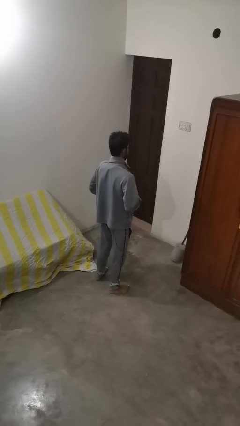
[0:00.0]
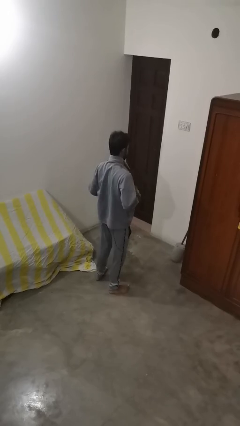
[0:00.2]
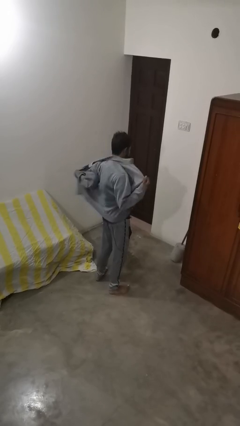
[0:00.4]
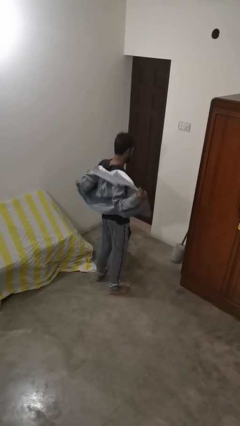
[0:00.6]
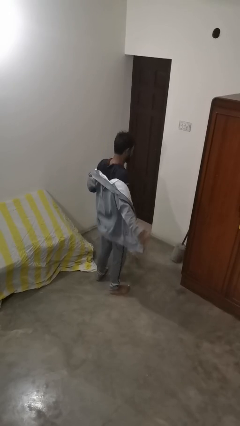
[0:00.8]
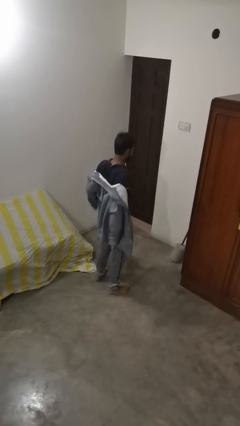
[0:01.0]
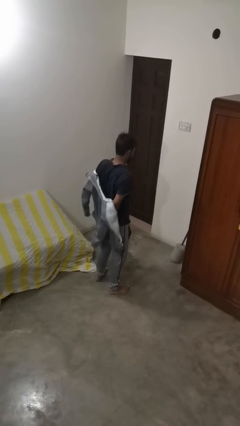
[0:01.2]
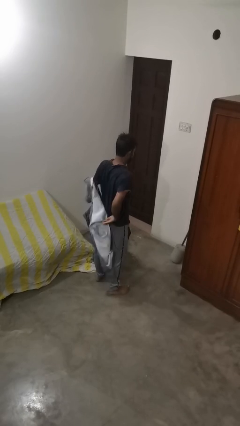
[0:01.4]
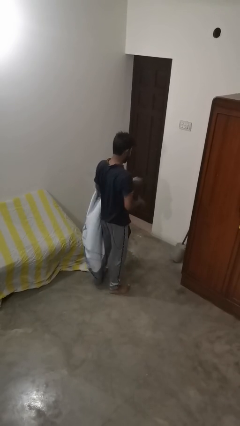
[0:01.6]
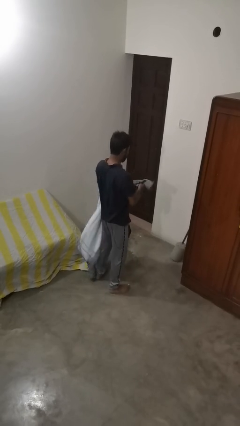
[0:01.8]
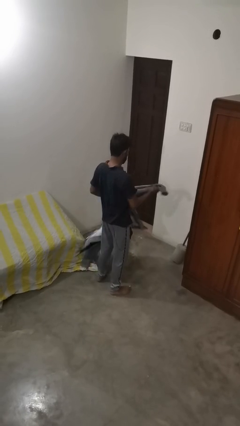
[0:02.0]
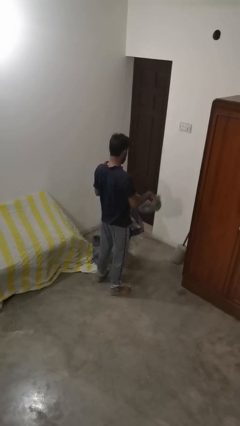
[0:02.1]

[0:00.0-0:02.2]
person takes off jacket

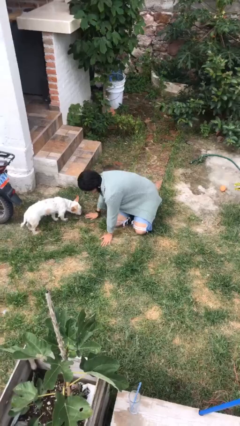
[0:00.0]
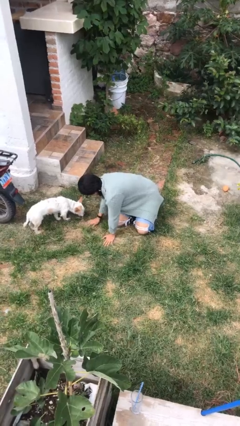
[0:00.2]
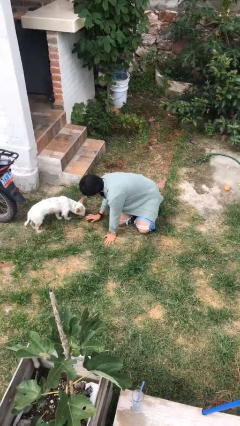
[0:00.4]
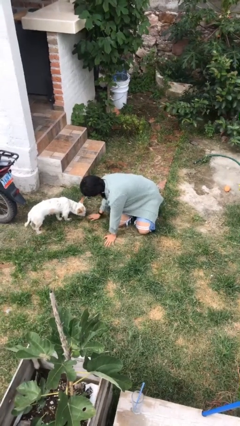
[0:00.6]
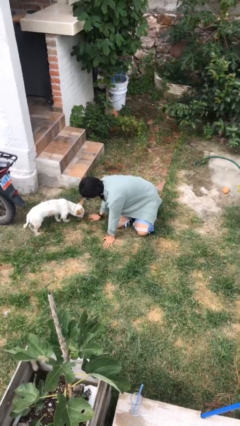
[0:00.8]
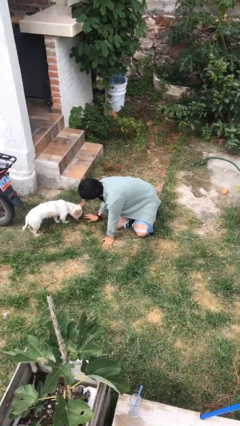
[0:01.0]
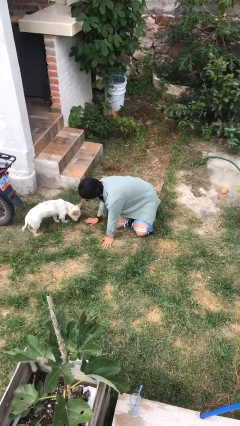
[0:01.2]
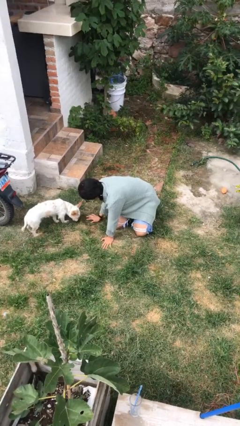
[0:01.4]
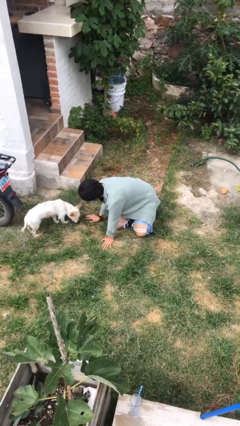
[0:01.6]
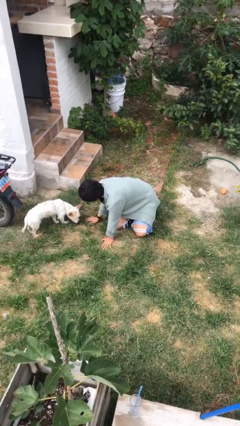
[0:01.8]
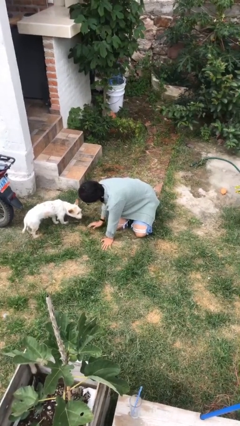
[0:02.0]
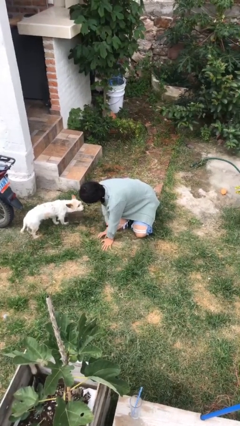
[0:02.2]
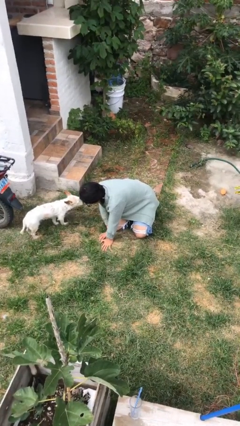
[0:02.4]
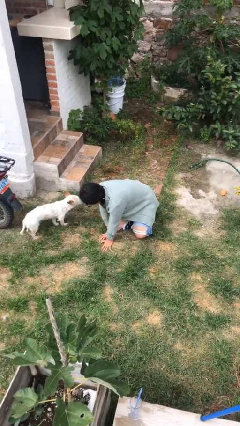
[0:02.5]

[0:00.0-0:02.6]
person crawls

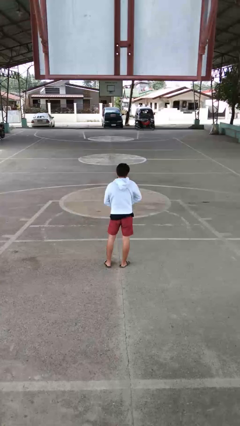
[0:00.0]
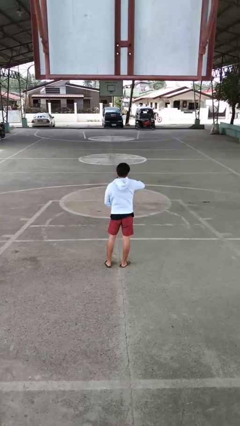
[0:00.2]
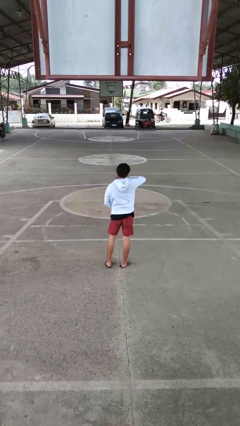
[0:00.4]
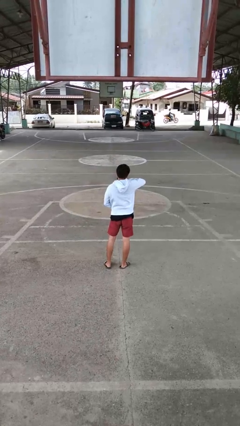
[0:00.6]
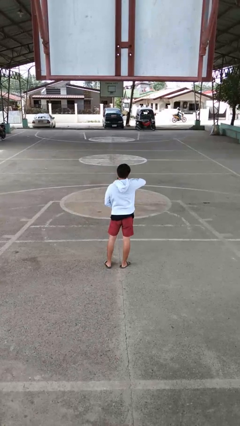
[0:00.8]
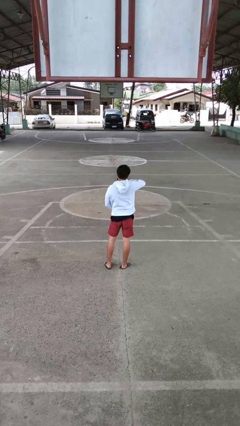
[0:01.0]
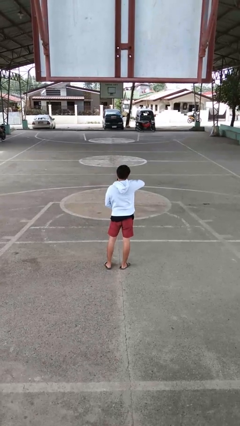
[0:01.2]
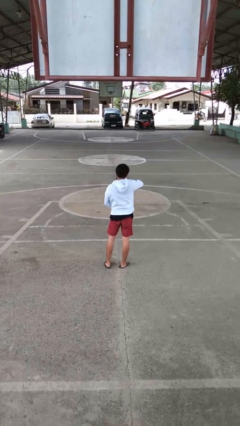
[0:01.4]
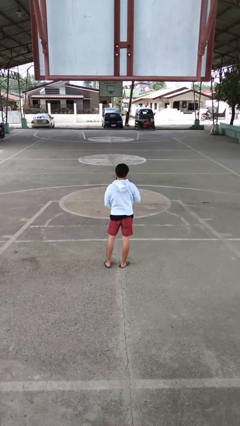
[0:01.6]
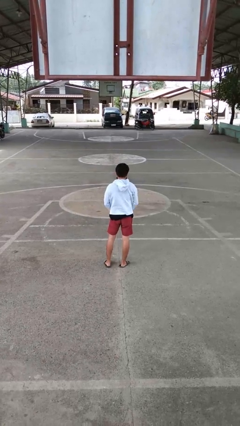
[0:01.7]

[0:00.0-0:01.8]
person zips up jacket

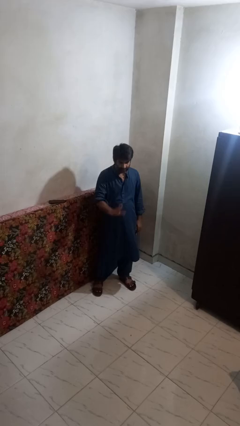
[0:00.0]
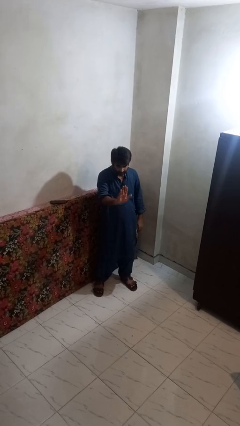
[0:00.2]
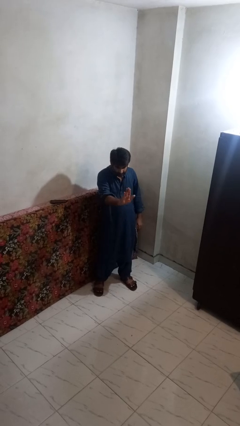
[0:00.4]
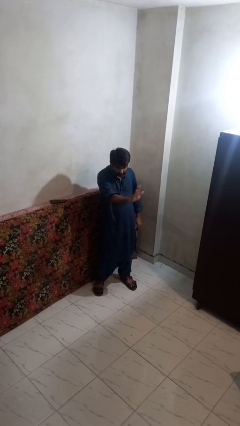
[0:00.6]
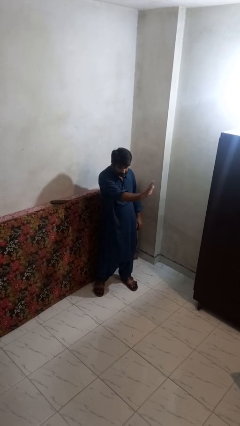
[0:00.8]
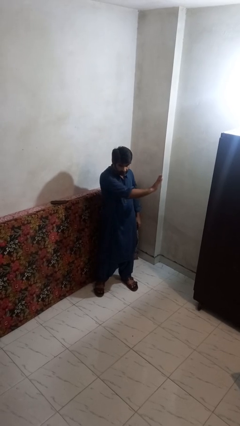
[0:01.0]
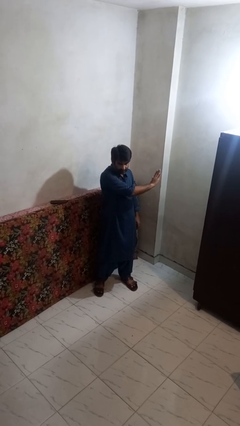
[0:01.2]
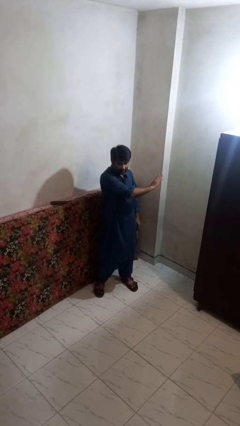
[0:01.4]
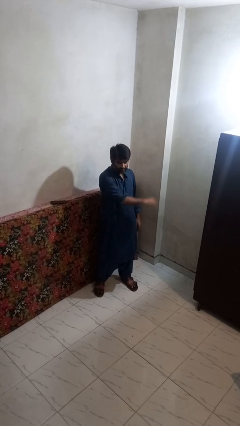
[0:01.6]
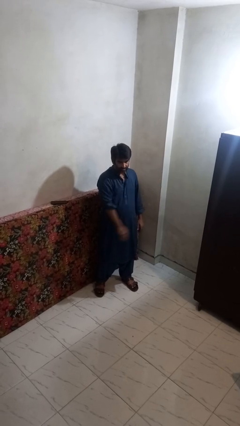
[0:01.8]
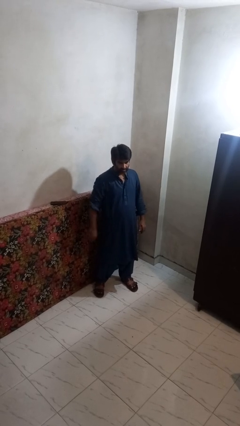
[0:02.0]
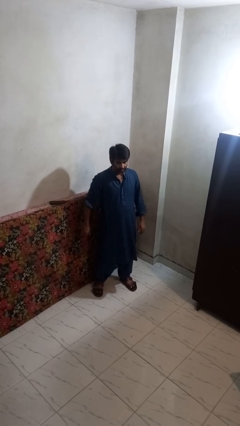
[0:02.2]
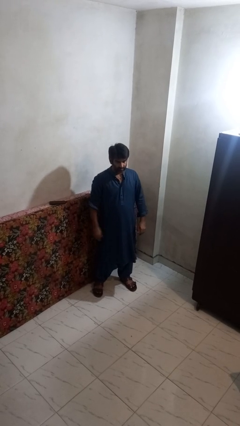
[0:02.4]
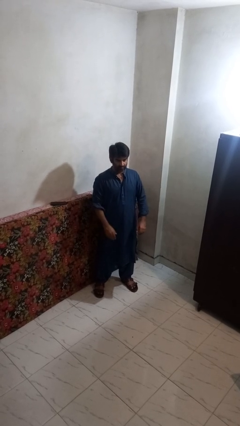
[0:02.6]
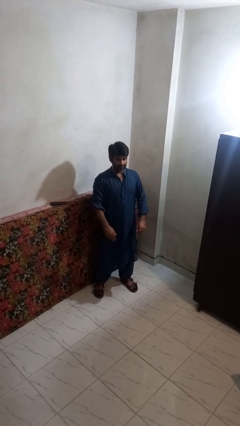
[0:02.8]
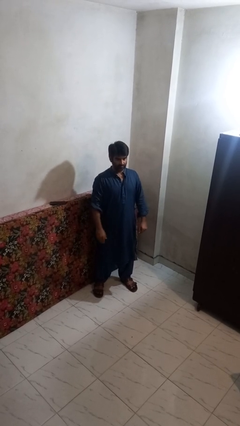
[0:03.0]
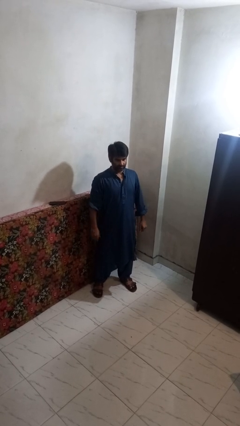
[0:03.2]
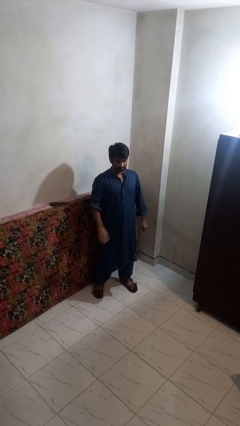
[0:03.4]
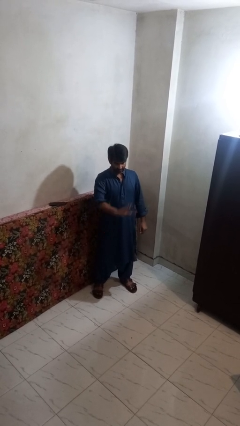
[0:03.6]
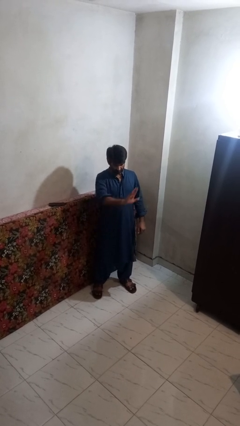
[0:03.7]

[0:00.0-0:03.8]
person gestures swipe left

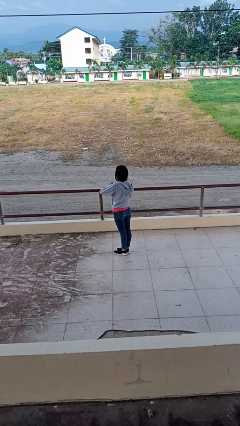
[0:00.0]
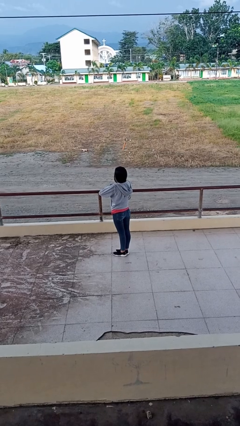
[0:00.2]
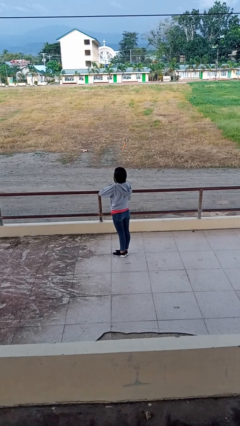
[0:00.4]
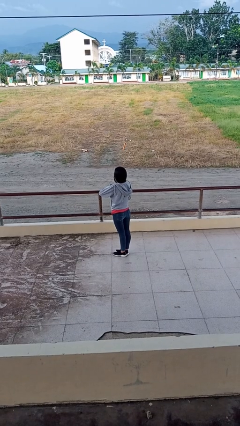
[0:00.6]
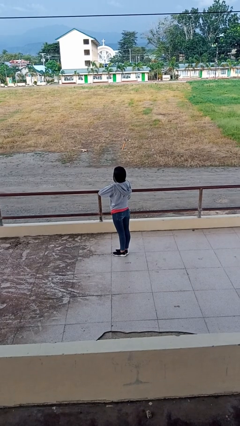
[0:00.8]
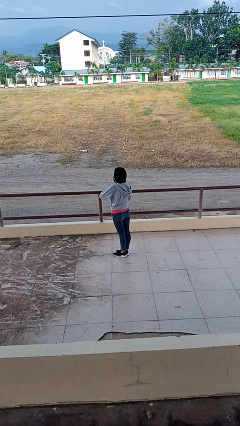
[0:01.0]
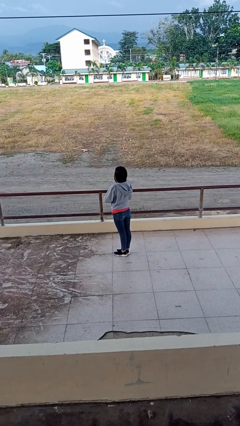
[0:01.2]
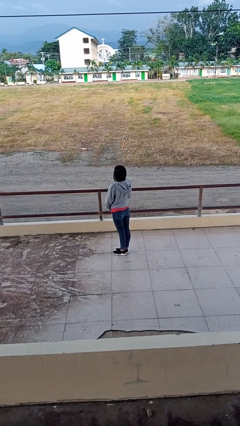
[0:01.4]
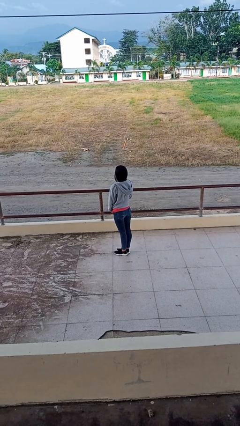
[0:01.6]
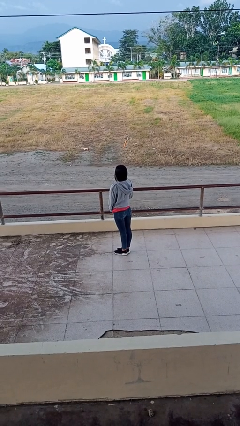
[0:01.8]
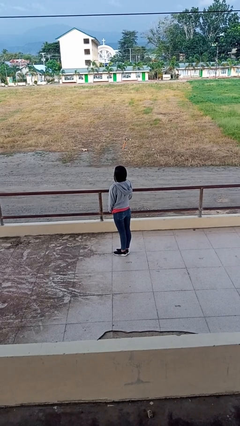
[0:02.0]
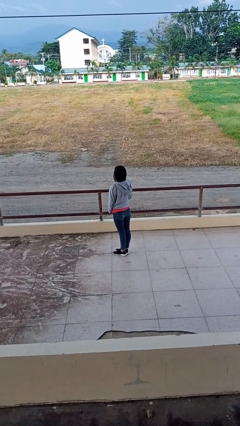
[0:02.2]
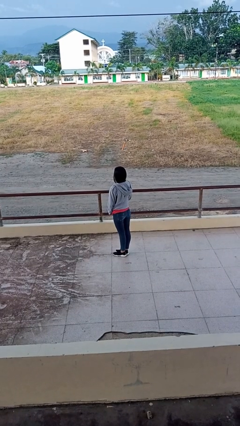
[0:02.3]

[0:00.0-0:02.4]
person unzips jacket

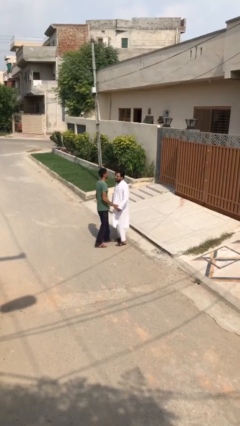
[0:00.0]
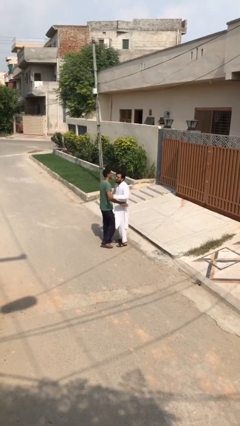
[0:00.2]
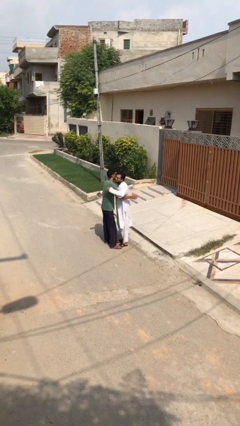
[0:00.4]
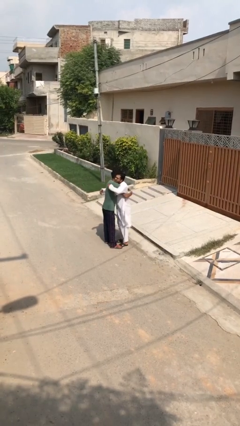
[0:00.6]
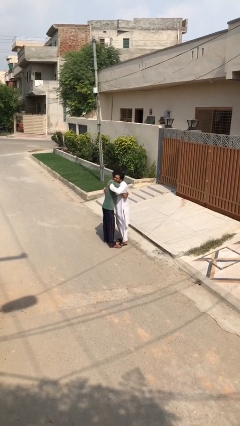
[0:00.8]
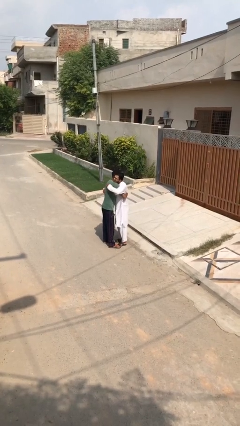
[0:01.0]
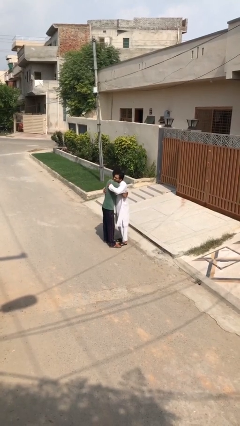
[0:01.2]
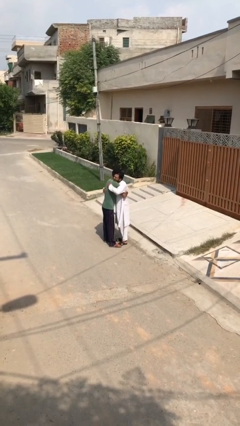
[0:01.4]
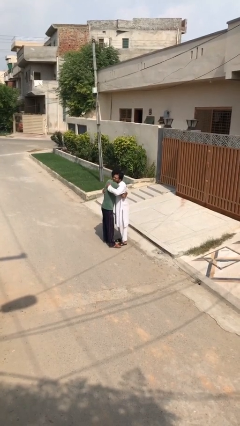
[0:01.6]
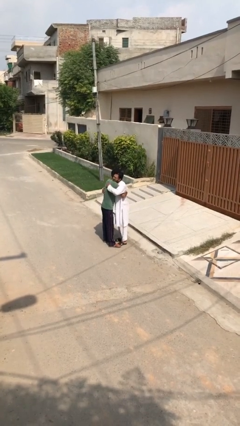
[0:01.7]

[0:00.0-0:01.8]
person embraces person

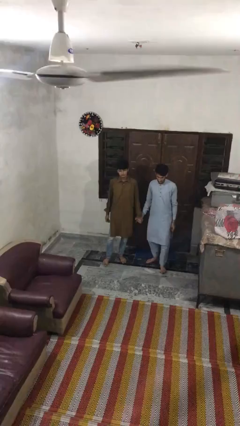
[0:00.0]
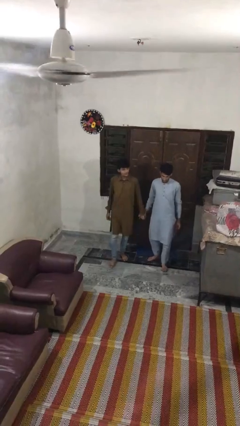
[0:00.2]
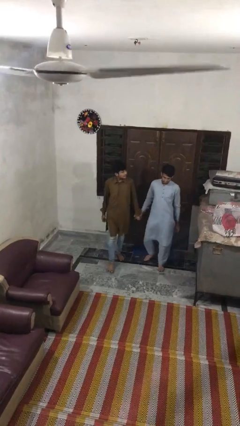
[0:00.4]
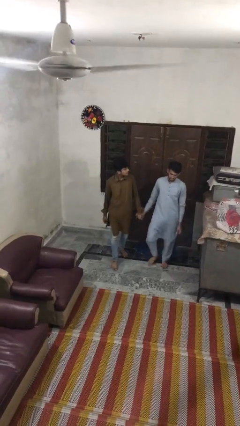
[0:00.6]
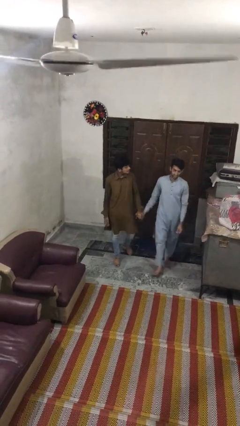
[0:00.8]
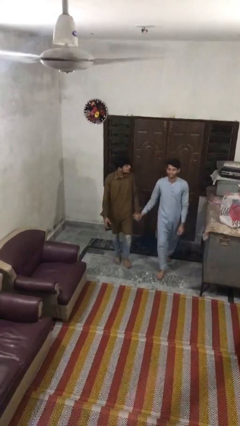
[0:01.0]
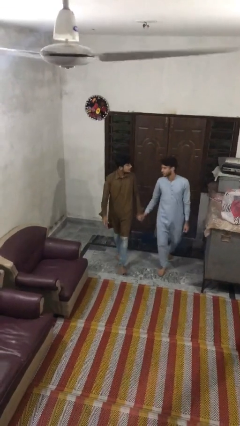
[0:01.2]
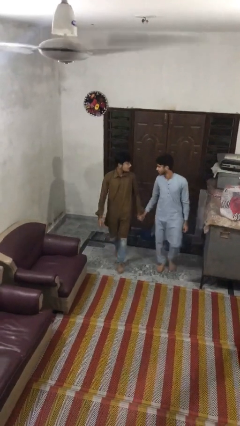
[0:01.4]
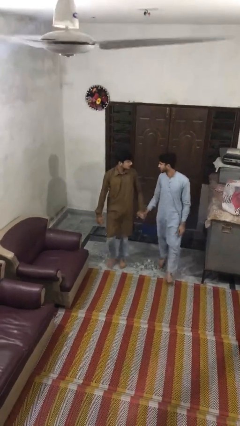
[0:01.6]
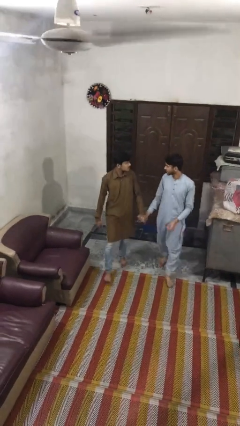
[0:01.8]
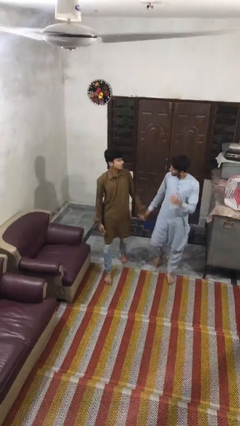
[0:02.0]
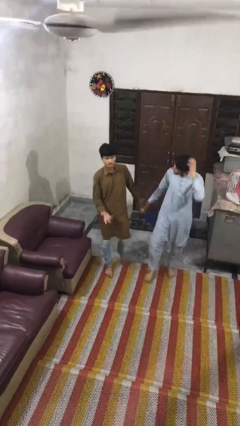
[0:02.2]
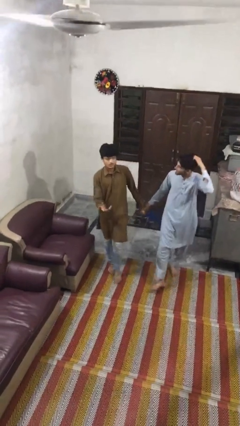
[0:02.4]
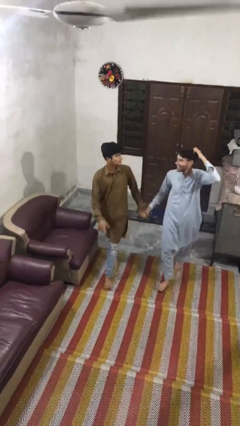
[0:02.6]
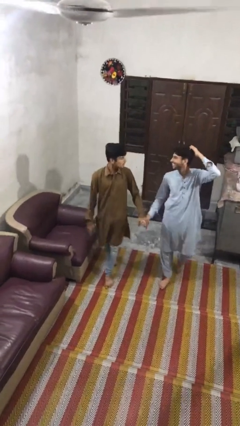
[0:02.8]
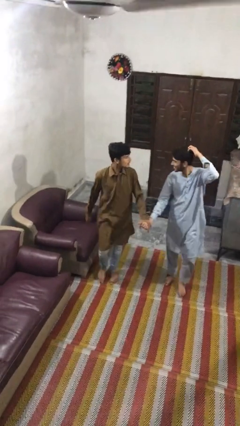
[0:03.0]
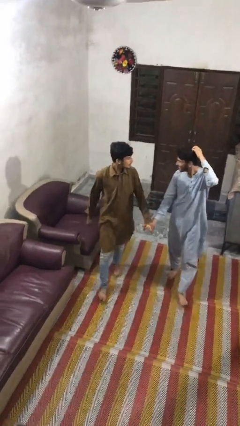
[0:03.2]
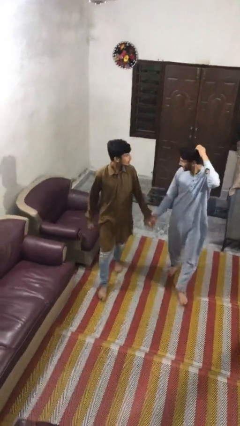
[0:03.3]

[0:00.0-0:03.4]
person holds hand
